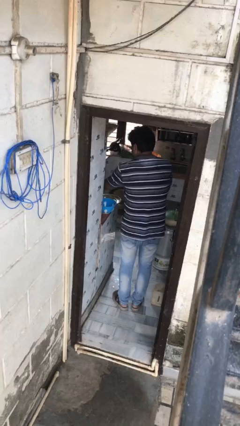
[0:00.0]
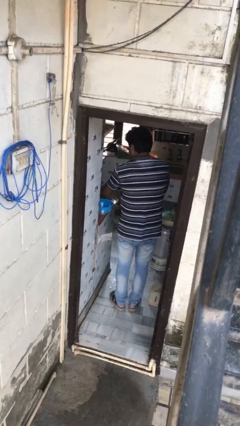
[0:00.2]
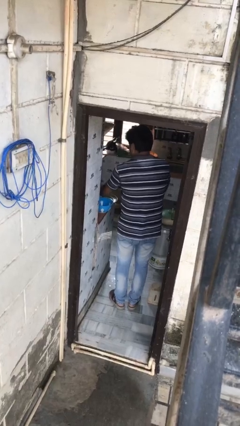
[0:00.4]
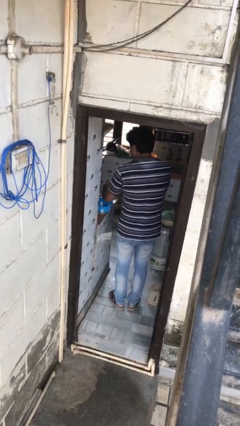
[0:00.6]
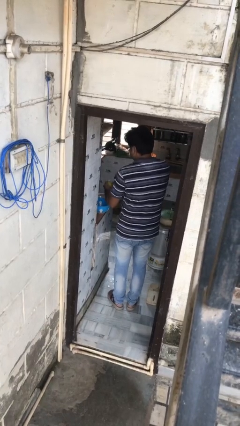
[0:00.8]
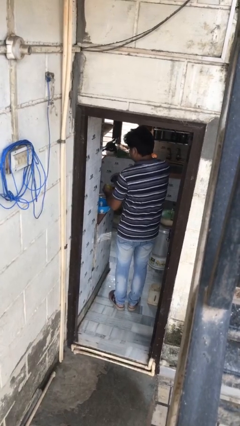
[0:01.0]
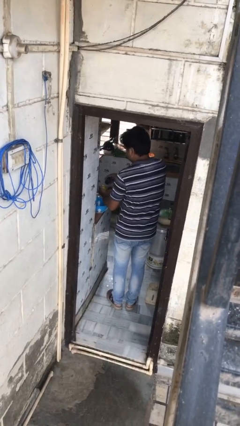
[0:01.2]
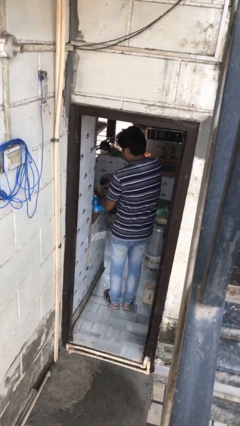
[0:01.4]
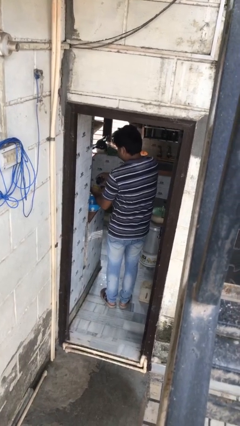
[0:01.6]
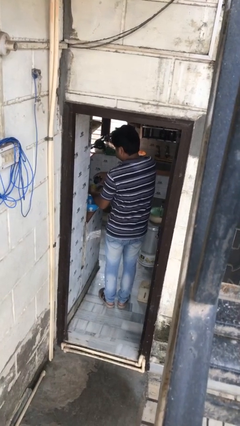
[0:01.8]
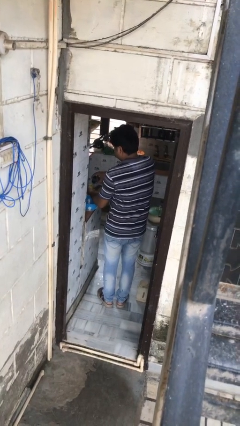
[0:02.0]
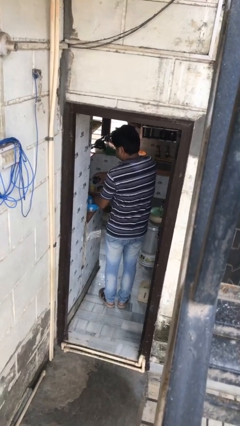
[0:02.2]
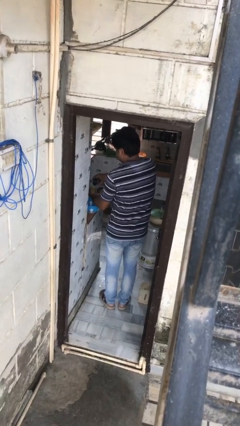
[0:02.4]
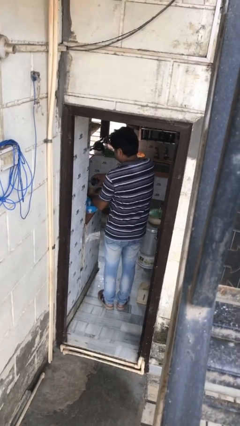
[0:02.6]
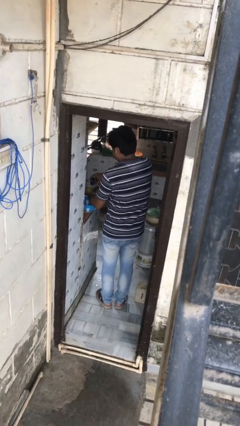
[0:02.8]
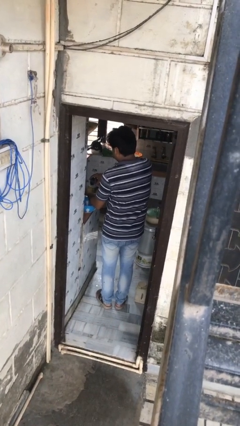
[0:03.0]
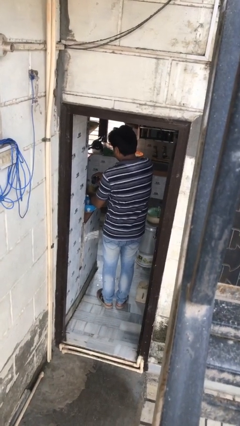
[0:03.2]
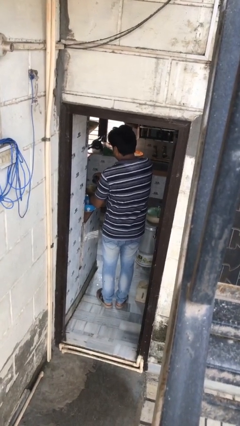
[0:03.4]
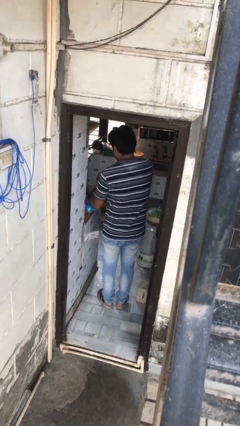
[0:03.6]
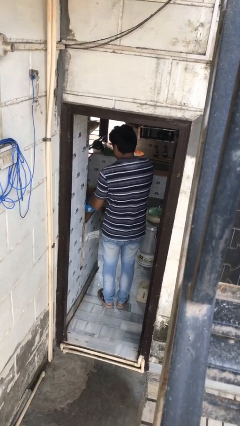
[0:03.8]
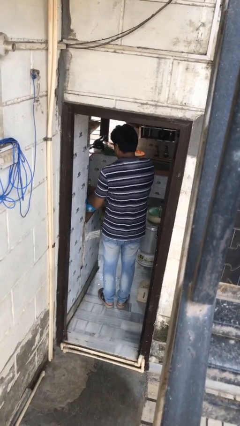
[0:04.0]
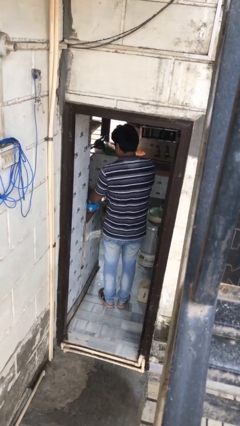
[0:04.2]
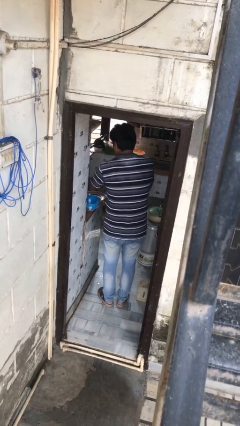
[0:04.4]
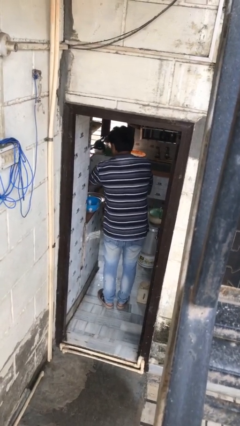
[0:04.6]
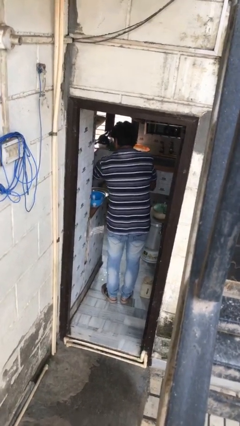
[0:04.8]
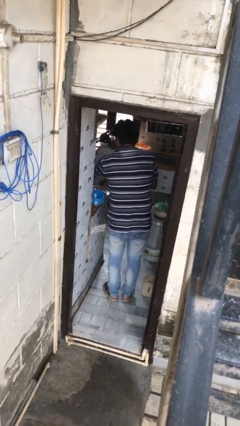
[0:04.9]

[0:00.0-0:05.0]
person washes dish

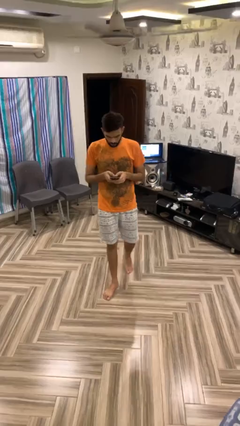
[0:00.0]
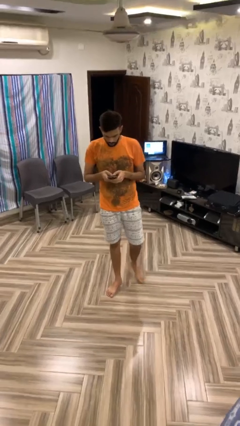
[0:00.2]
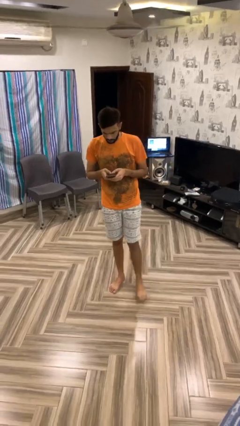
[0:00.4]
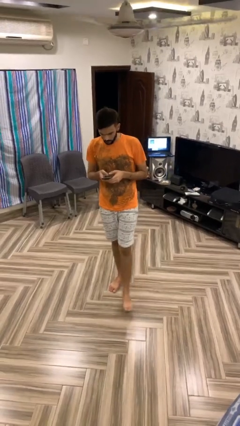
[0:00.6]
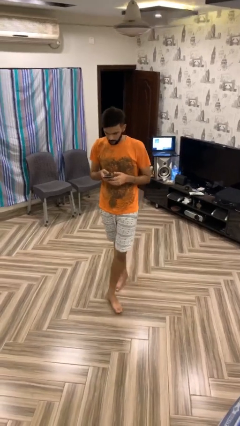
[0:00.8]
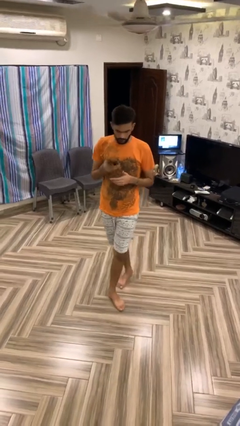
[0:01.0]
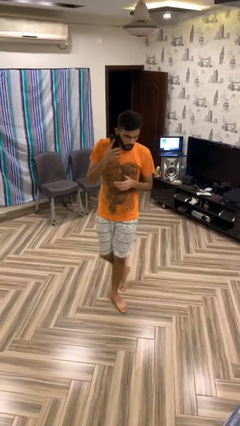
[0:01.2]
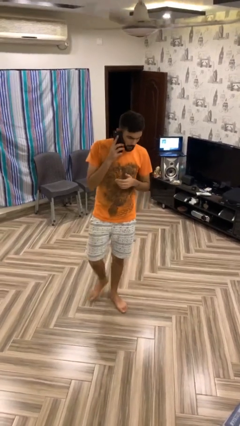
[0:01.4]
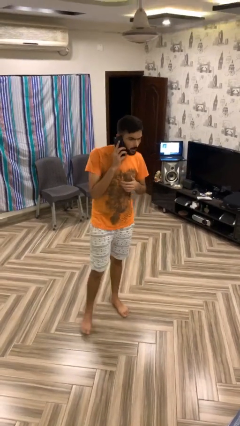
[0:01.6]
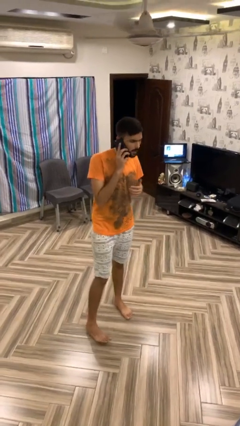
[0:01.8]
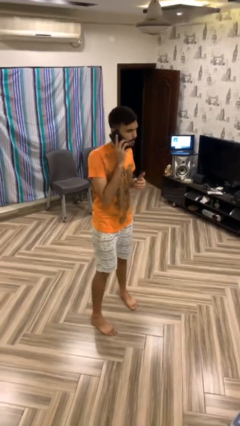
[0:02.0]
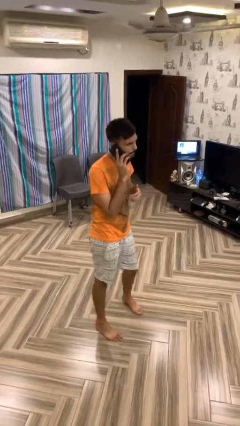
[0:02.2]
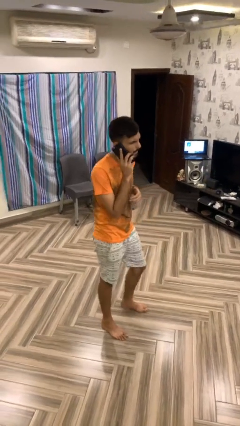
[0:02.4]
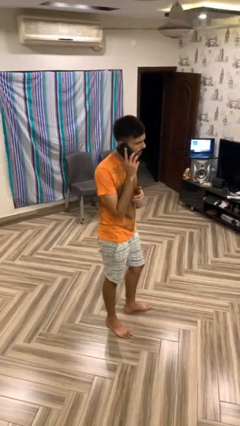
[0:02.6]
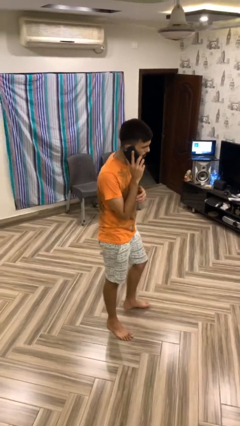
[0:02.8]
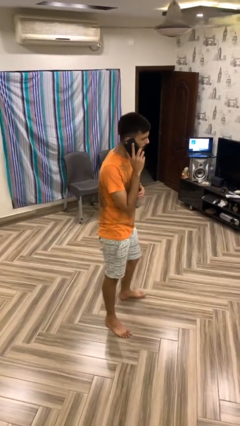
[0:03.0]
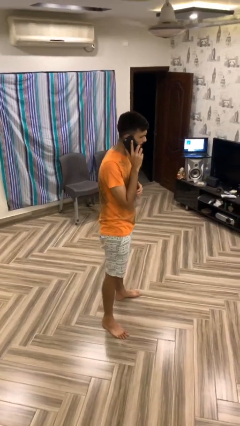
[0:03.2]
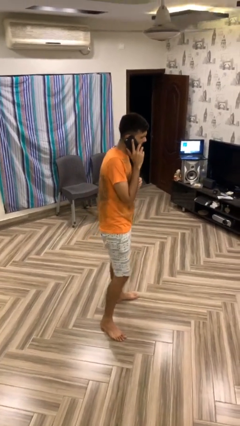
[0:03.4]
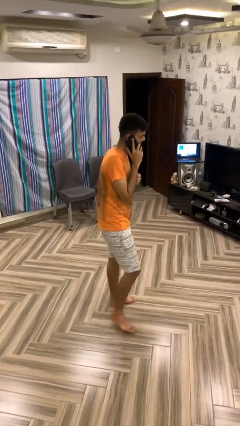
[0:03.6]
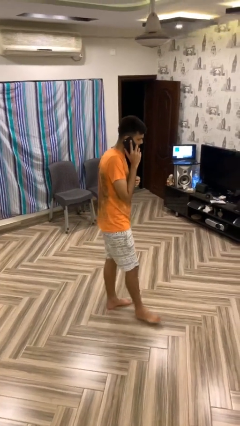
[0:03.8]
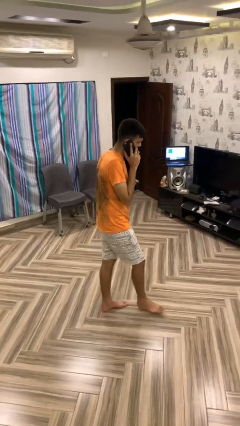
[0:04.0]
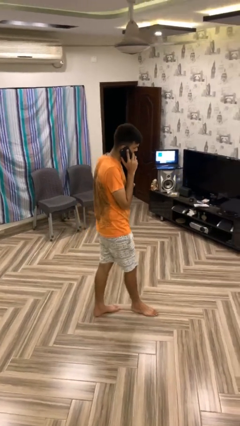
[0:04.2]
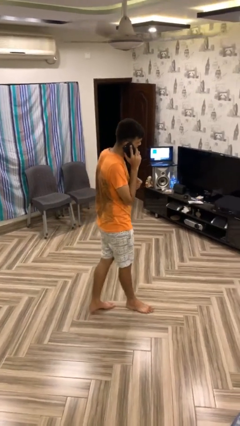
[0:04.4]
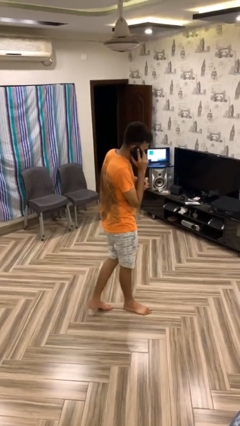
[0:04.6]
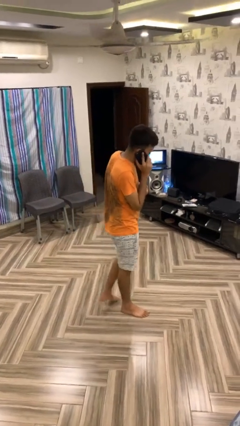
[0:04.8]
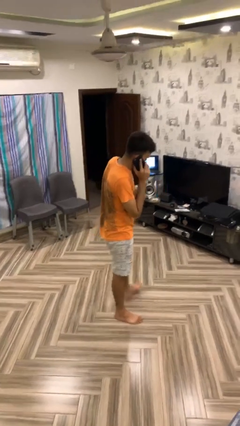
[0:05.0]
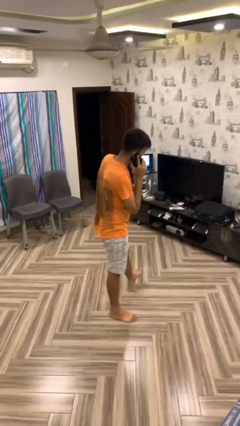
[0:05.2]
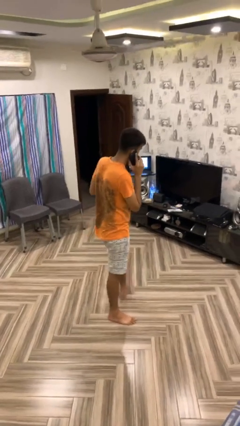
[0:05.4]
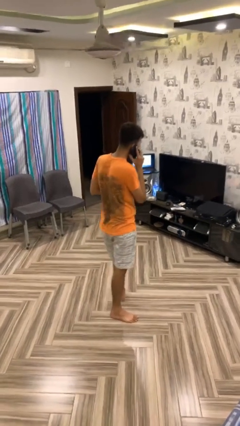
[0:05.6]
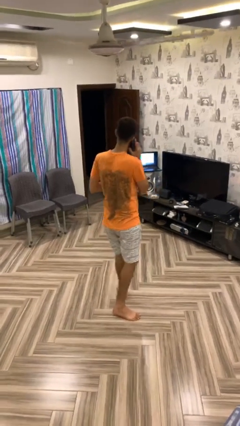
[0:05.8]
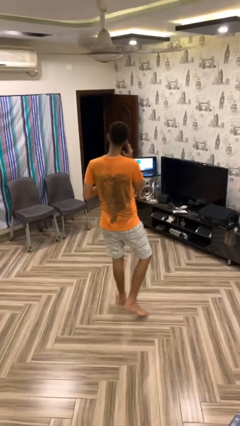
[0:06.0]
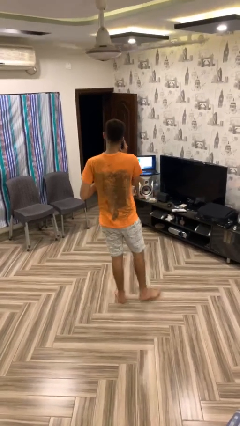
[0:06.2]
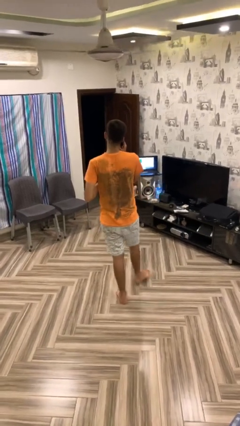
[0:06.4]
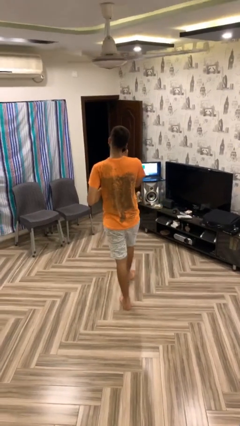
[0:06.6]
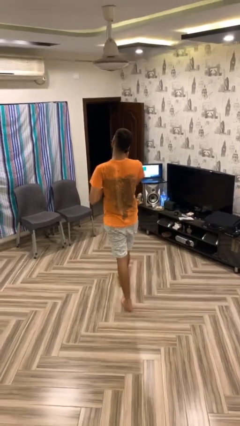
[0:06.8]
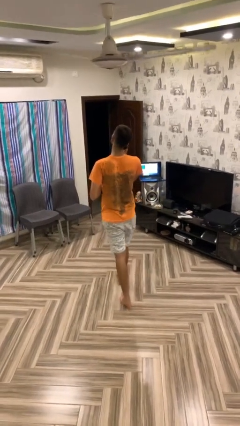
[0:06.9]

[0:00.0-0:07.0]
person talks on phone

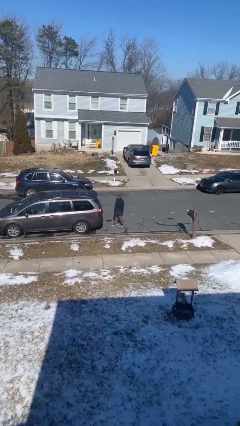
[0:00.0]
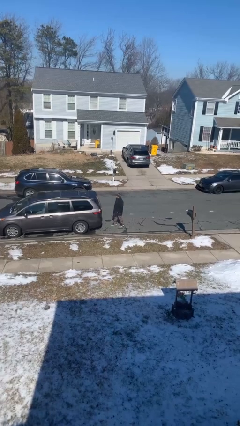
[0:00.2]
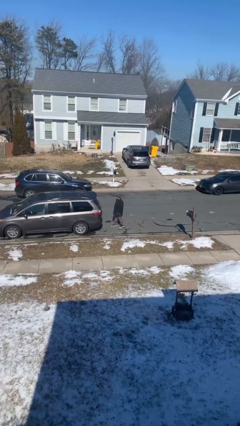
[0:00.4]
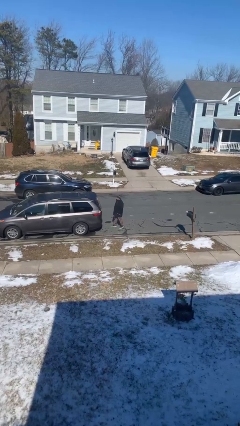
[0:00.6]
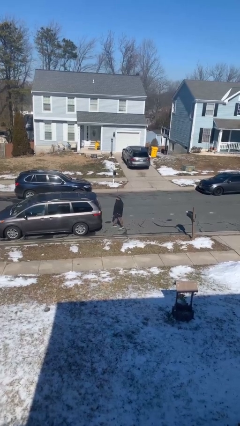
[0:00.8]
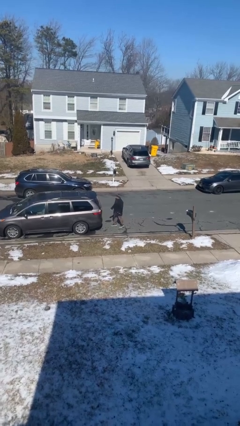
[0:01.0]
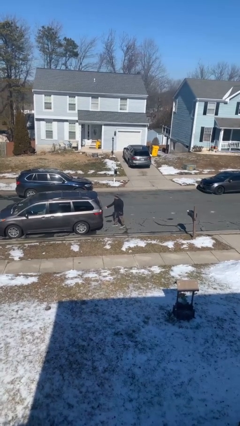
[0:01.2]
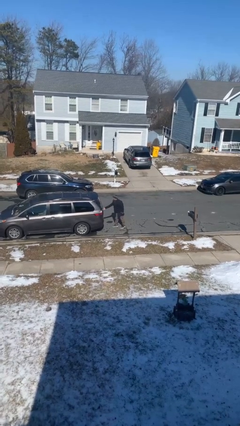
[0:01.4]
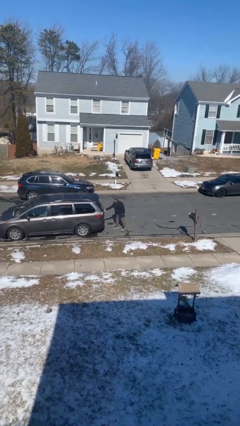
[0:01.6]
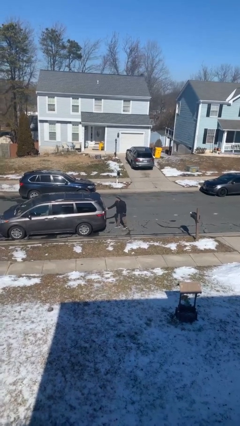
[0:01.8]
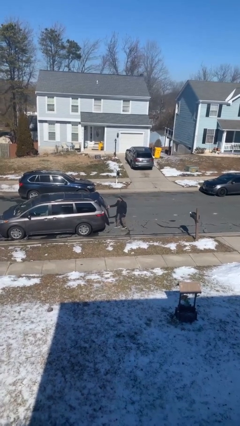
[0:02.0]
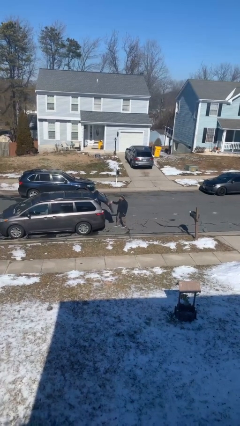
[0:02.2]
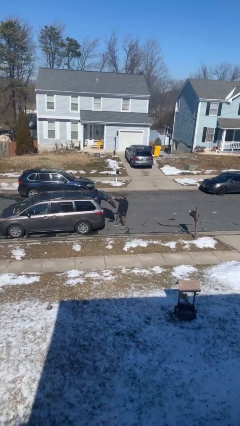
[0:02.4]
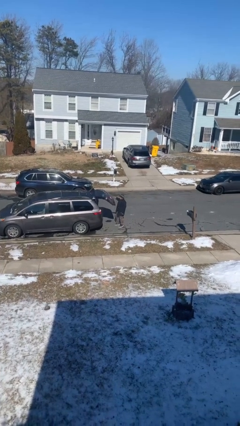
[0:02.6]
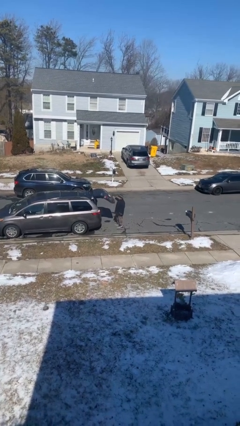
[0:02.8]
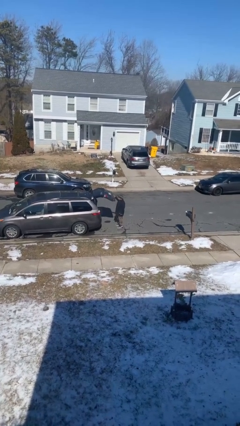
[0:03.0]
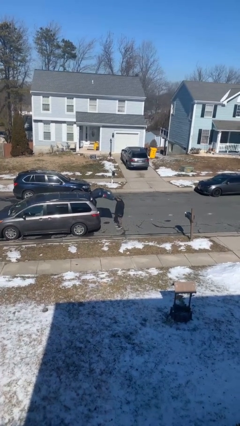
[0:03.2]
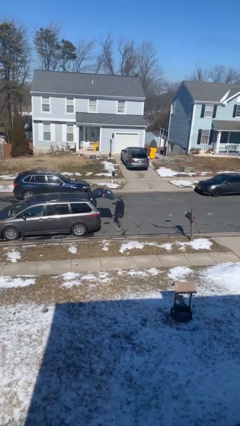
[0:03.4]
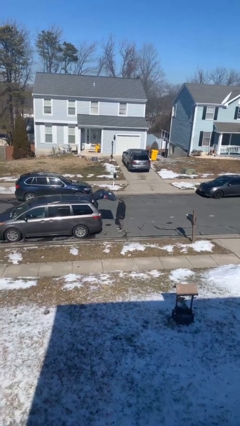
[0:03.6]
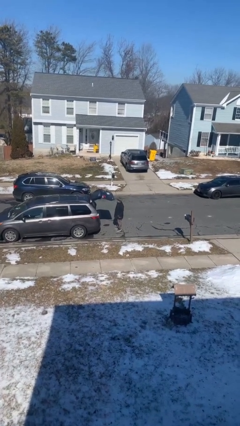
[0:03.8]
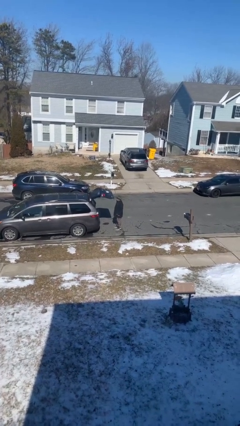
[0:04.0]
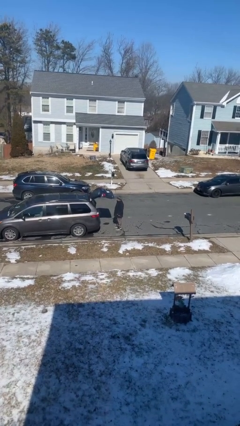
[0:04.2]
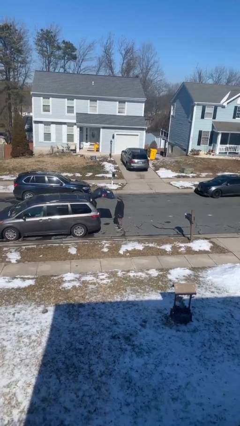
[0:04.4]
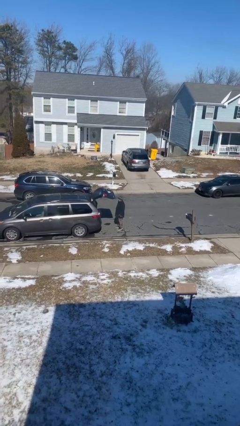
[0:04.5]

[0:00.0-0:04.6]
person opens car trunk

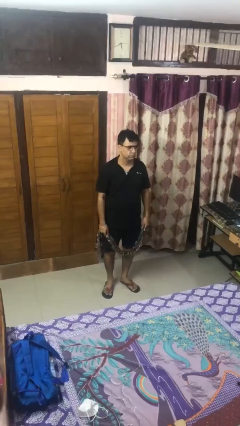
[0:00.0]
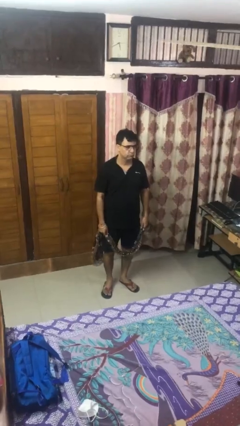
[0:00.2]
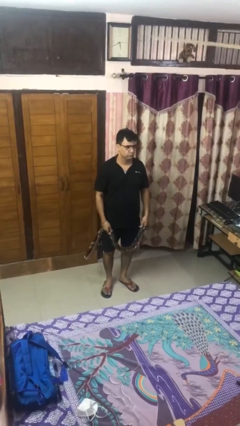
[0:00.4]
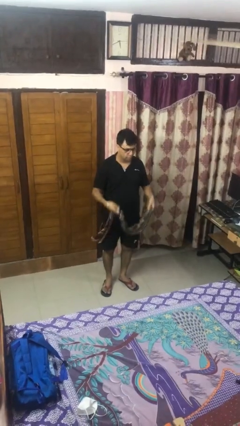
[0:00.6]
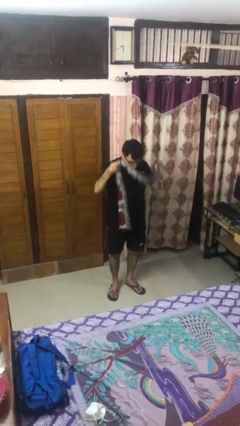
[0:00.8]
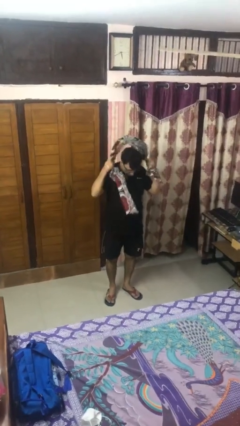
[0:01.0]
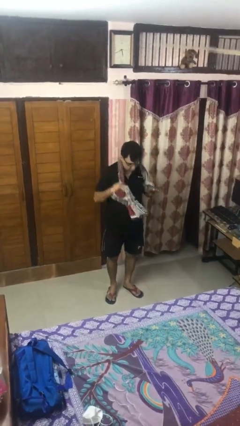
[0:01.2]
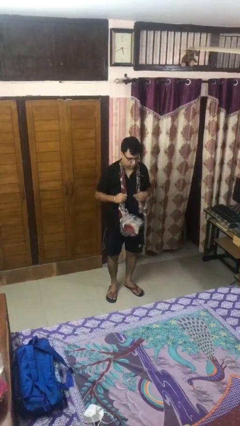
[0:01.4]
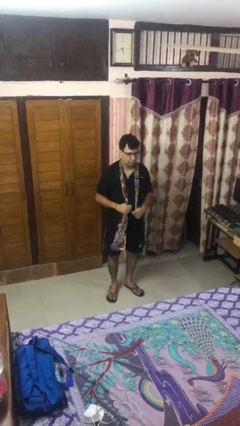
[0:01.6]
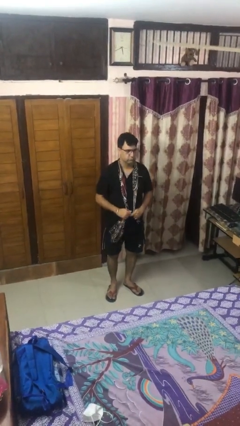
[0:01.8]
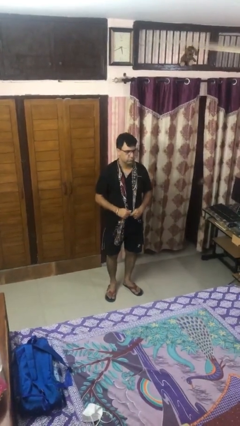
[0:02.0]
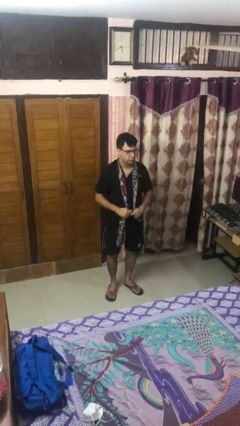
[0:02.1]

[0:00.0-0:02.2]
person puts on scarf
